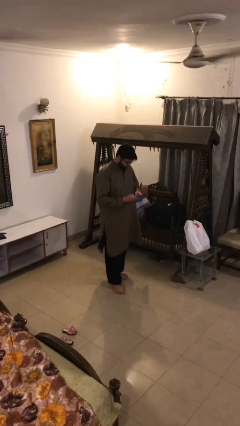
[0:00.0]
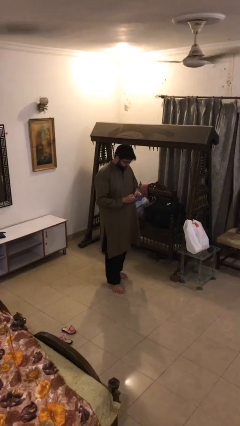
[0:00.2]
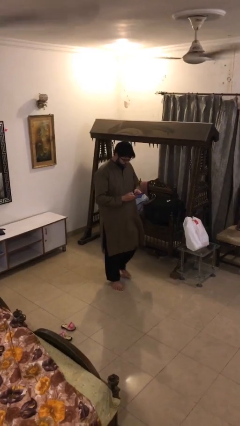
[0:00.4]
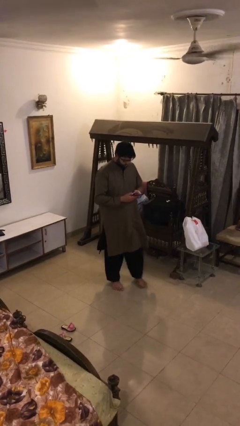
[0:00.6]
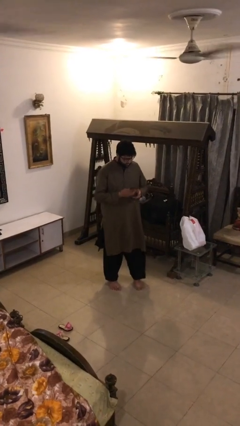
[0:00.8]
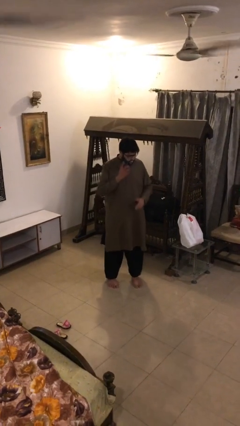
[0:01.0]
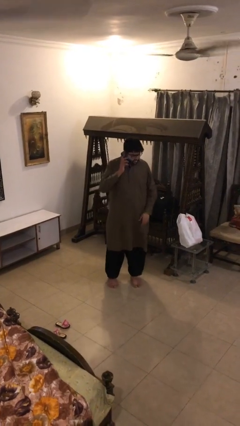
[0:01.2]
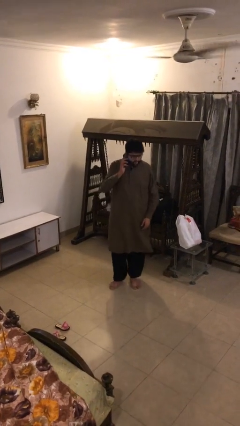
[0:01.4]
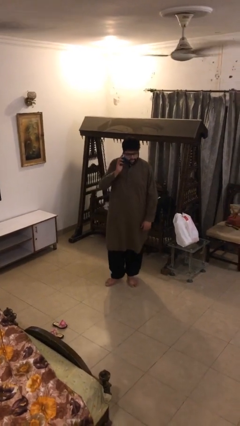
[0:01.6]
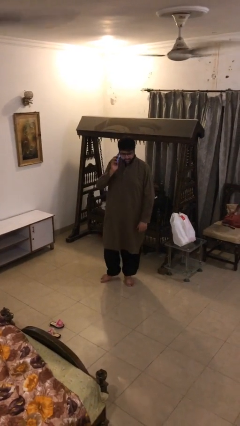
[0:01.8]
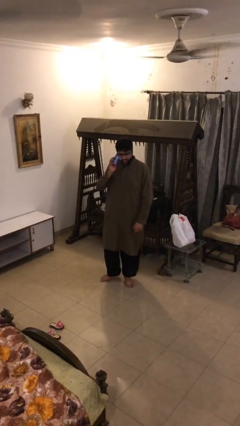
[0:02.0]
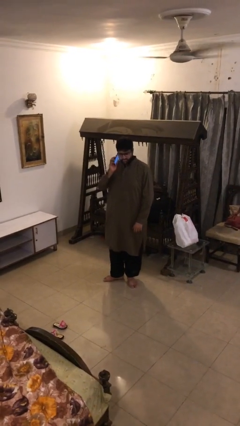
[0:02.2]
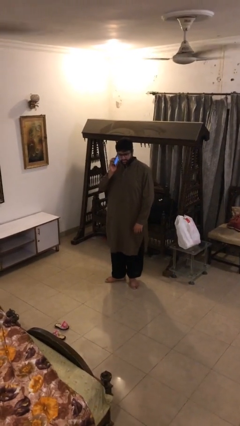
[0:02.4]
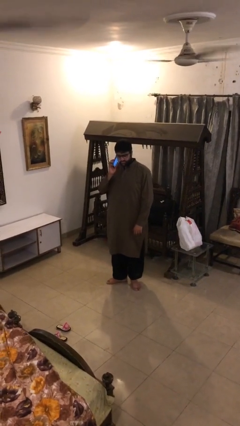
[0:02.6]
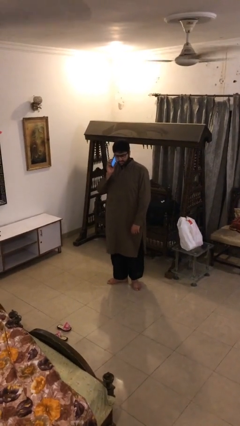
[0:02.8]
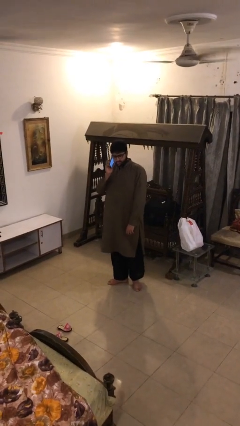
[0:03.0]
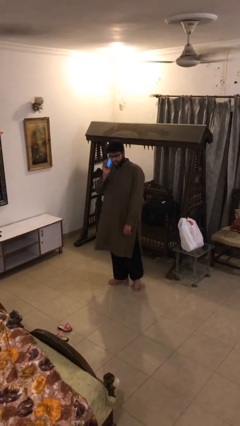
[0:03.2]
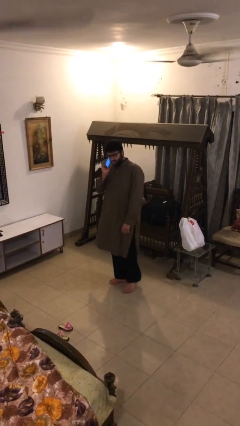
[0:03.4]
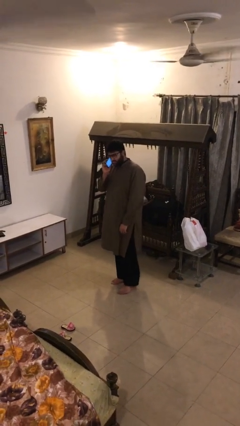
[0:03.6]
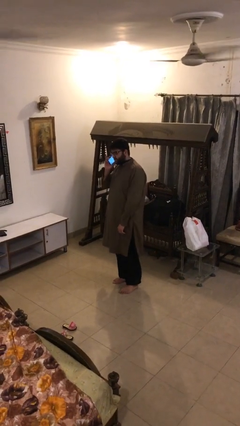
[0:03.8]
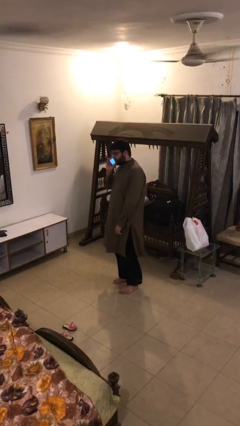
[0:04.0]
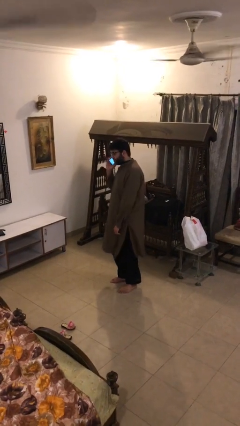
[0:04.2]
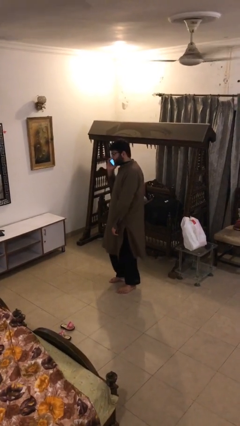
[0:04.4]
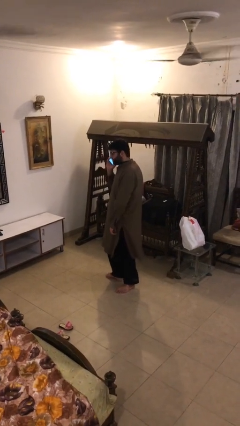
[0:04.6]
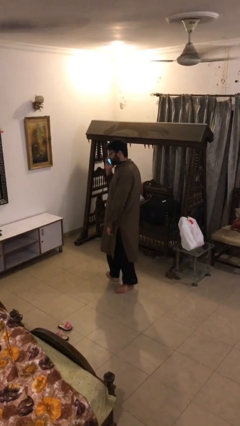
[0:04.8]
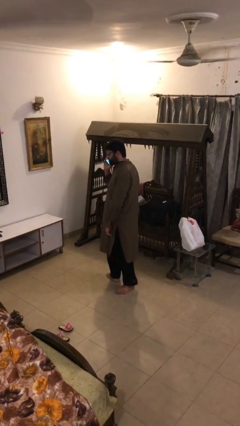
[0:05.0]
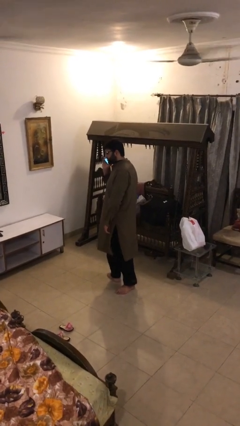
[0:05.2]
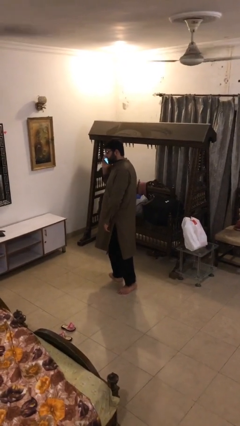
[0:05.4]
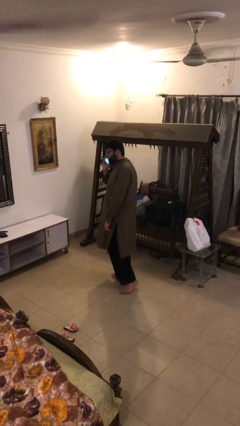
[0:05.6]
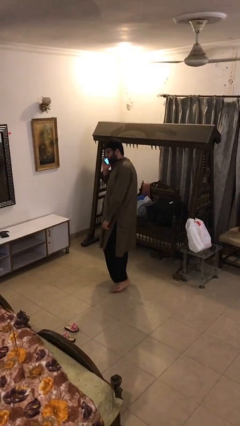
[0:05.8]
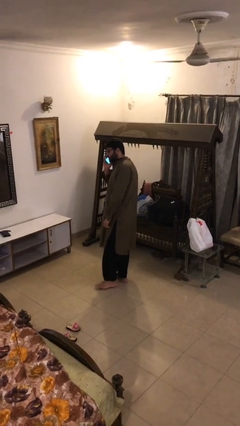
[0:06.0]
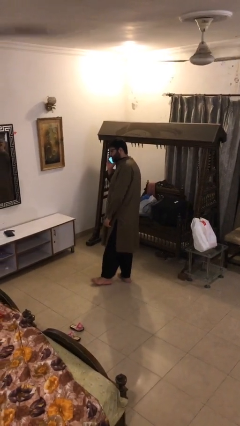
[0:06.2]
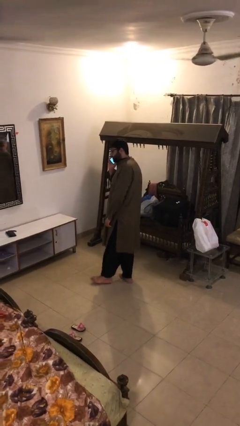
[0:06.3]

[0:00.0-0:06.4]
person talks on phone

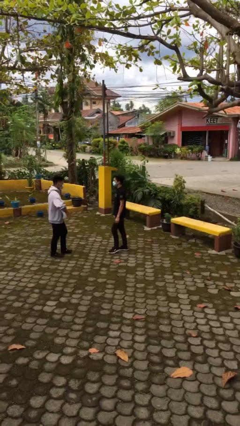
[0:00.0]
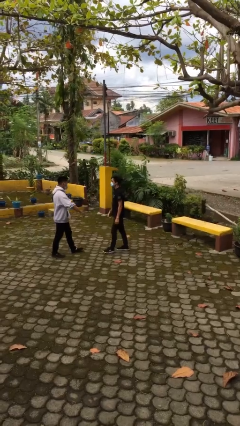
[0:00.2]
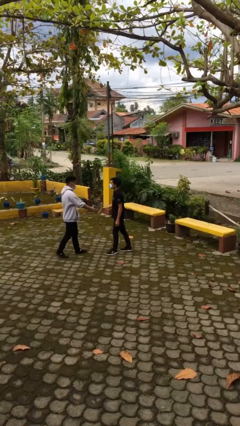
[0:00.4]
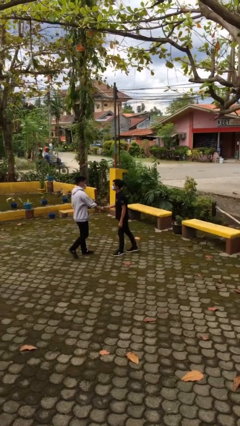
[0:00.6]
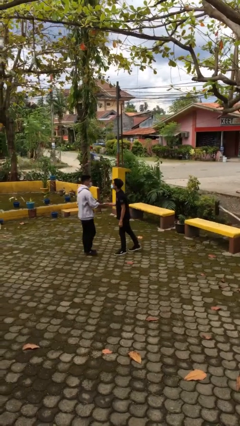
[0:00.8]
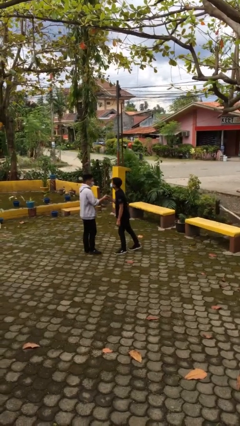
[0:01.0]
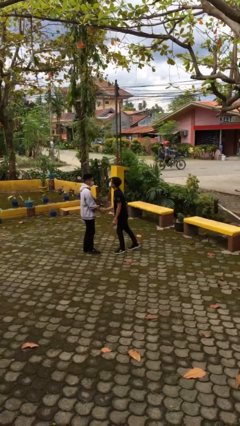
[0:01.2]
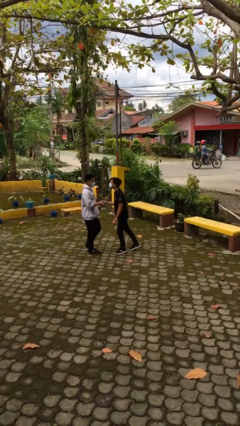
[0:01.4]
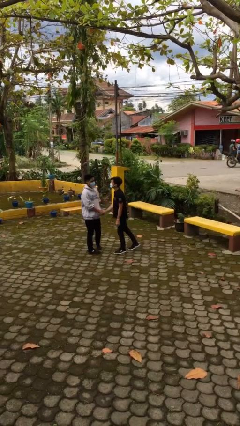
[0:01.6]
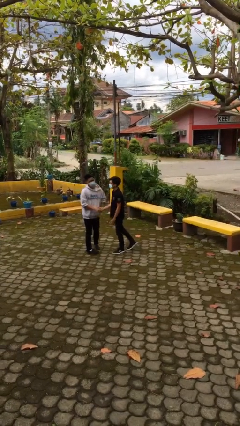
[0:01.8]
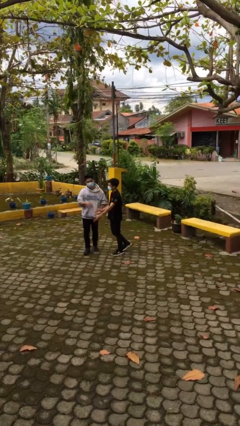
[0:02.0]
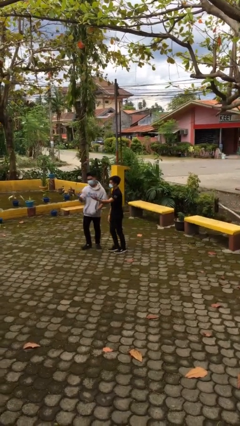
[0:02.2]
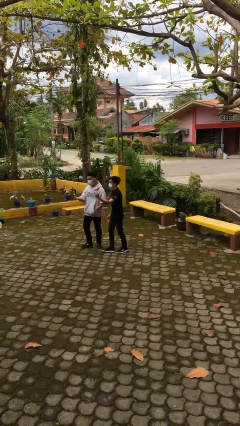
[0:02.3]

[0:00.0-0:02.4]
person shakes hand

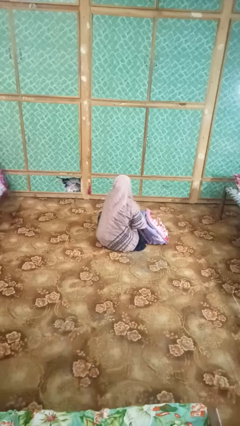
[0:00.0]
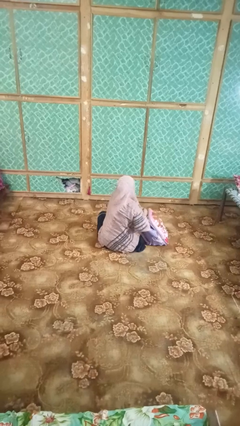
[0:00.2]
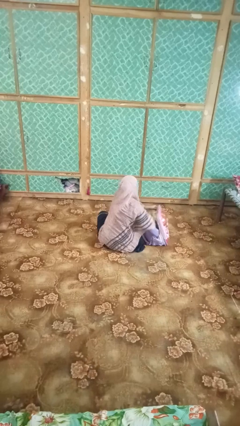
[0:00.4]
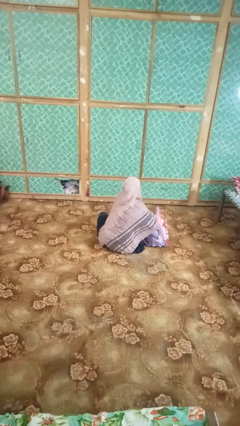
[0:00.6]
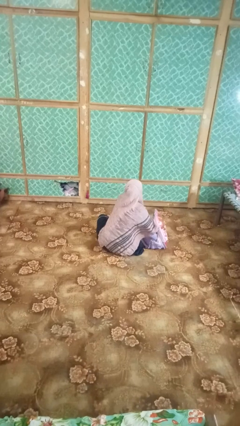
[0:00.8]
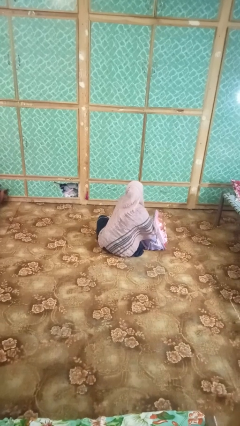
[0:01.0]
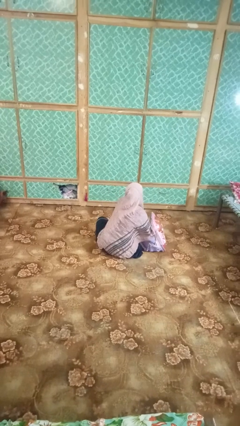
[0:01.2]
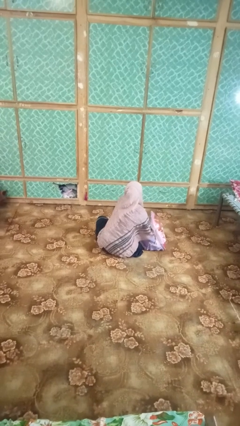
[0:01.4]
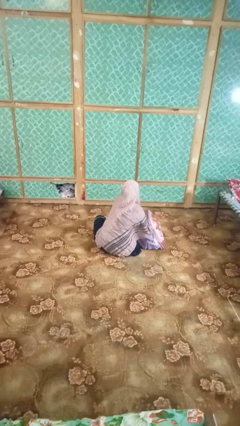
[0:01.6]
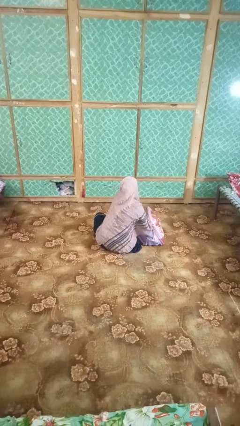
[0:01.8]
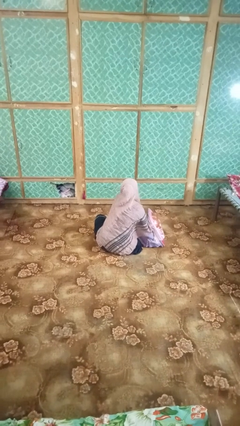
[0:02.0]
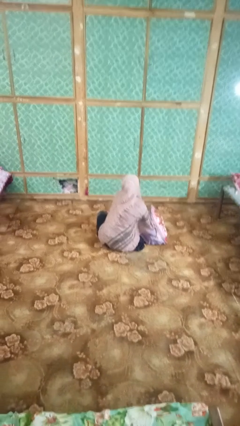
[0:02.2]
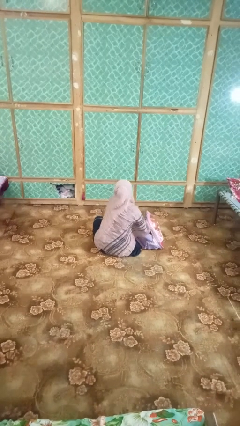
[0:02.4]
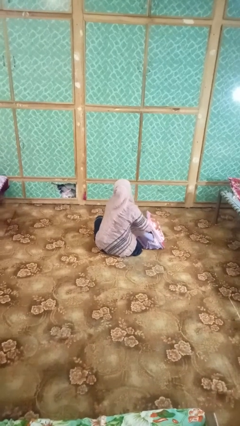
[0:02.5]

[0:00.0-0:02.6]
person searches in bag

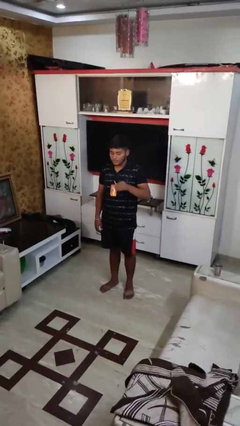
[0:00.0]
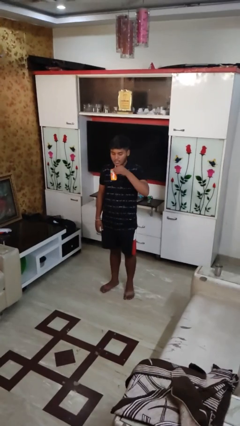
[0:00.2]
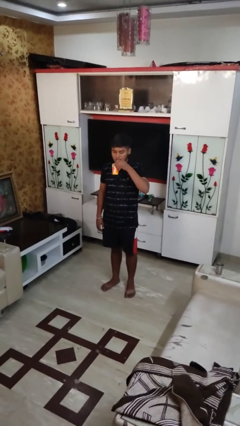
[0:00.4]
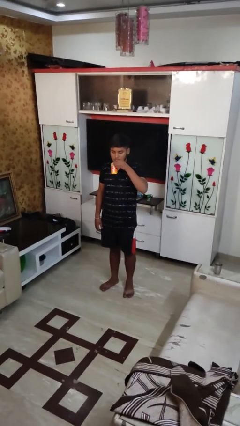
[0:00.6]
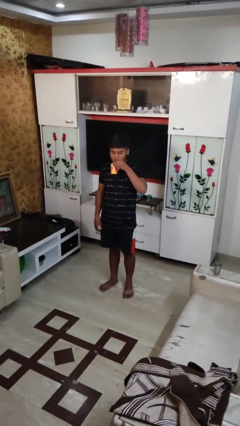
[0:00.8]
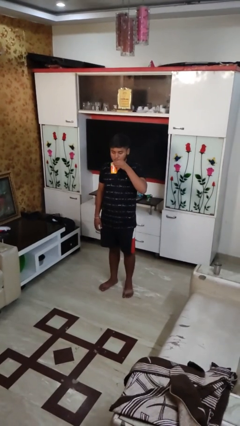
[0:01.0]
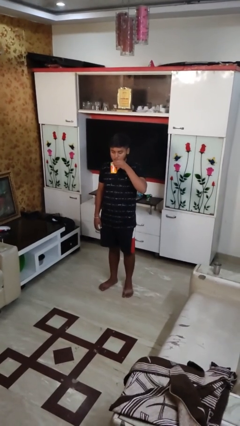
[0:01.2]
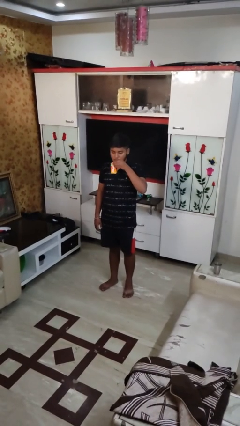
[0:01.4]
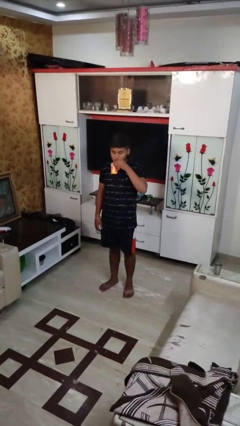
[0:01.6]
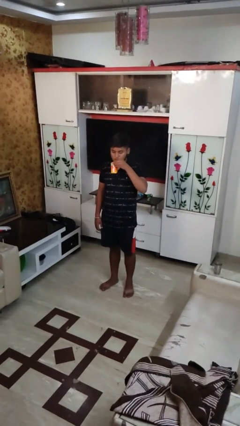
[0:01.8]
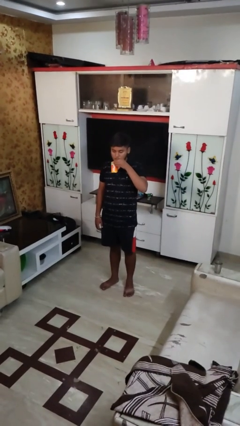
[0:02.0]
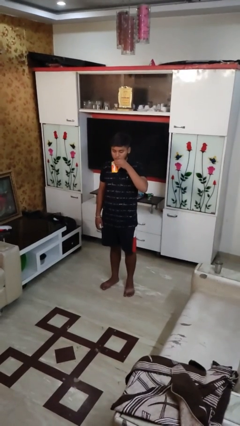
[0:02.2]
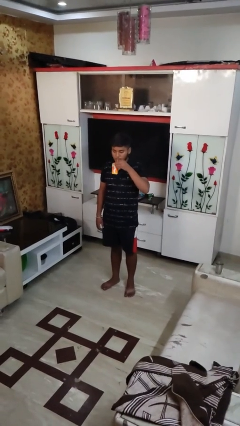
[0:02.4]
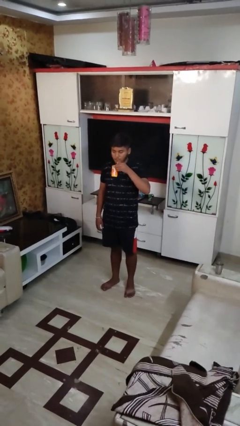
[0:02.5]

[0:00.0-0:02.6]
person drinks from straw

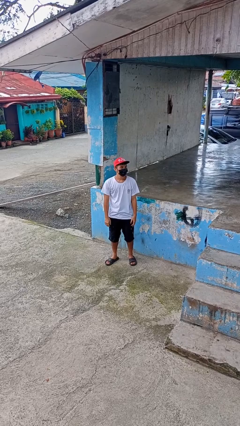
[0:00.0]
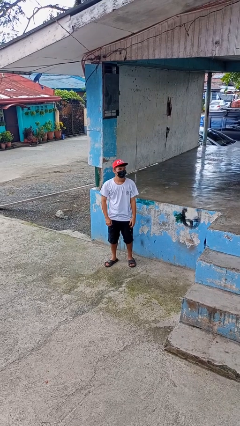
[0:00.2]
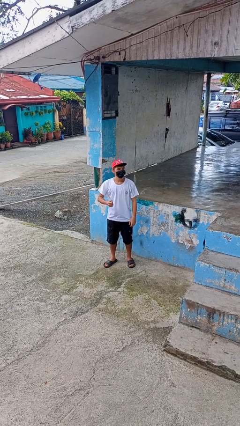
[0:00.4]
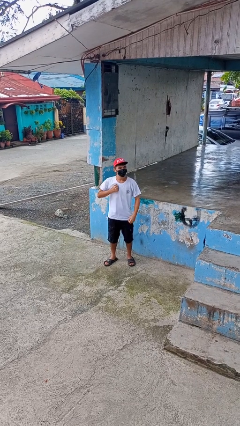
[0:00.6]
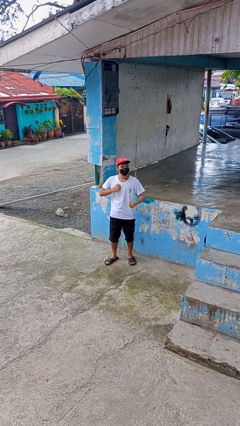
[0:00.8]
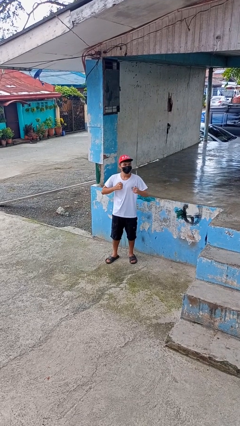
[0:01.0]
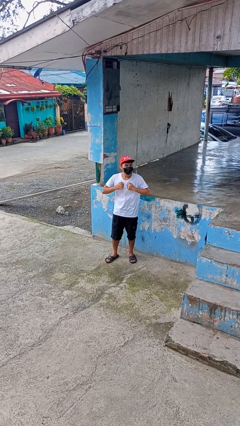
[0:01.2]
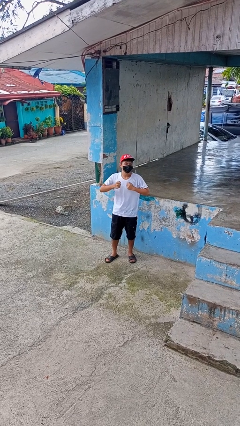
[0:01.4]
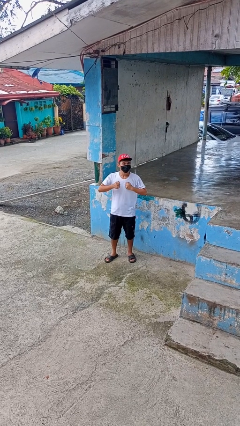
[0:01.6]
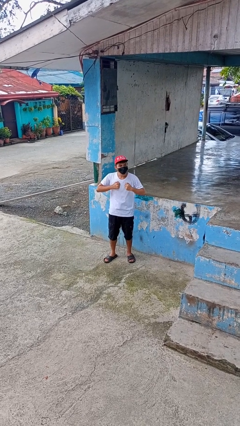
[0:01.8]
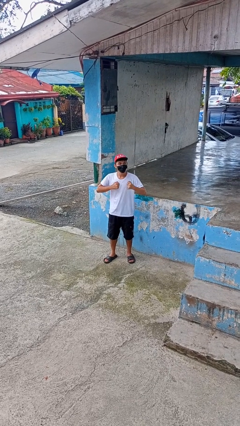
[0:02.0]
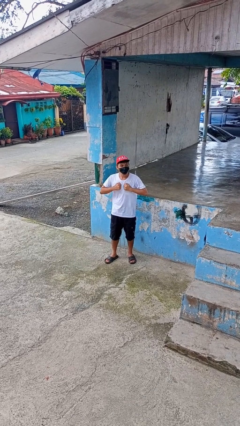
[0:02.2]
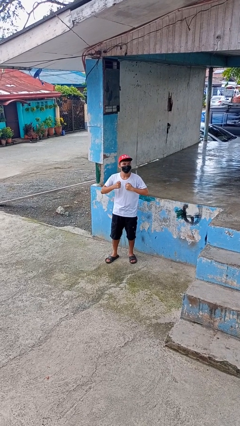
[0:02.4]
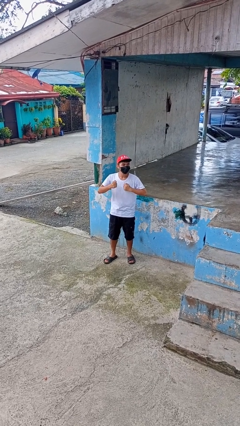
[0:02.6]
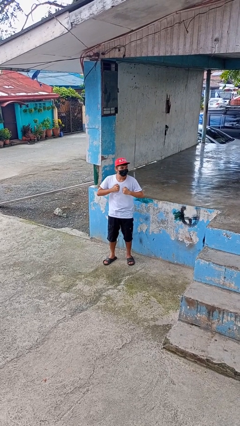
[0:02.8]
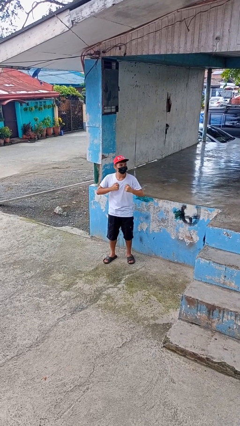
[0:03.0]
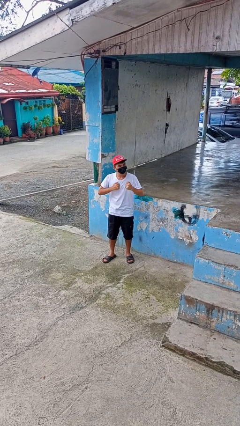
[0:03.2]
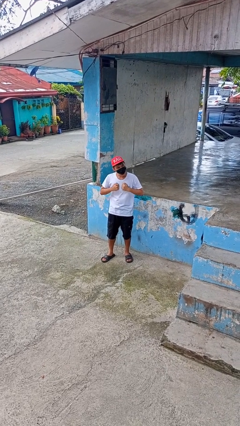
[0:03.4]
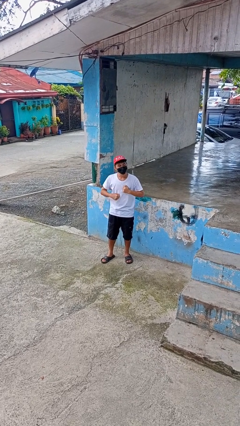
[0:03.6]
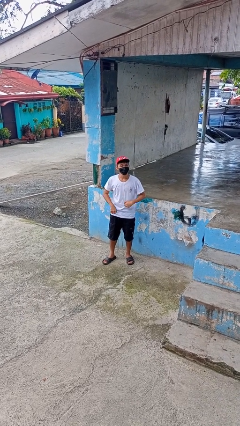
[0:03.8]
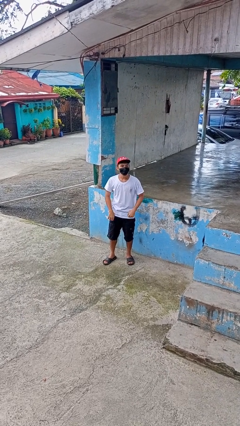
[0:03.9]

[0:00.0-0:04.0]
person drums on chest
